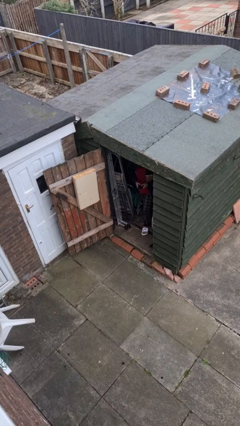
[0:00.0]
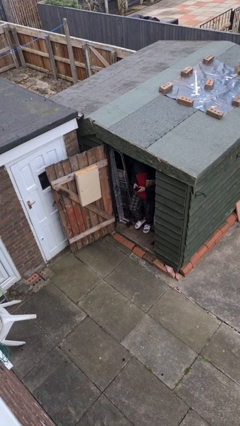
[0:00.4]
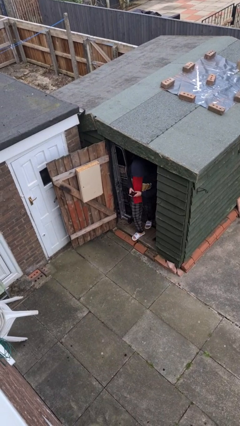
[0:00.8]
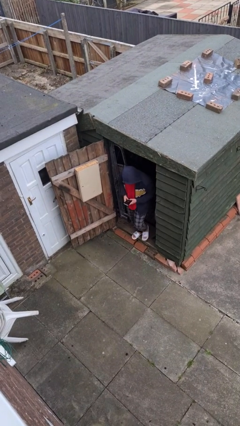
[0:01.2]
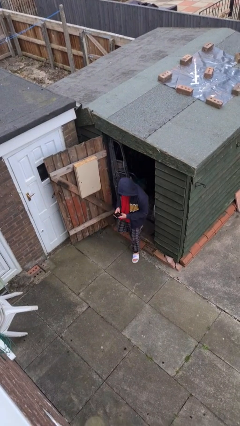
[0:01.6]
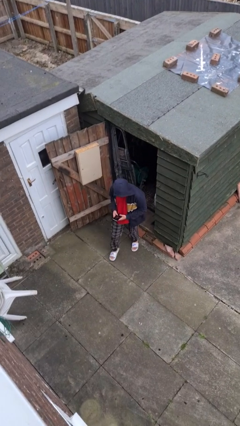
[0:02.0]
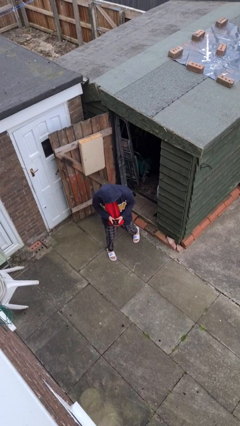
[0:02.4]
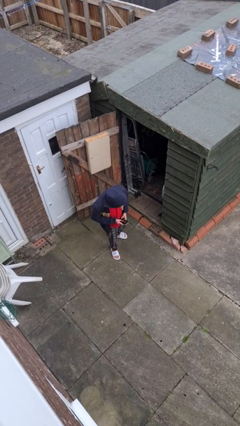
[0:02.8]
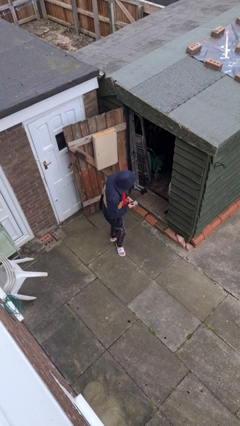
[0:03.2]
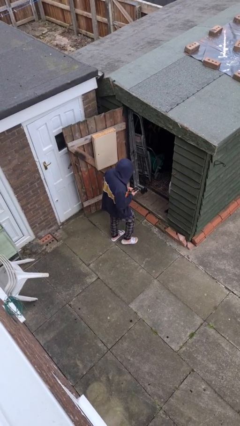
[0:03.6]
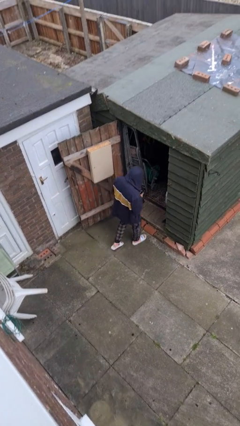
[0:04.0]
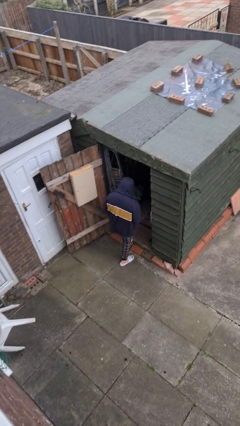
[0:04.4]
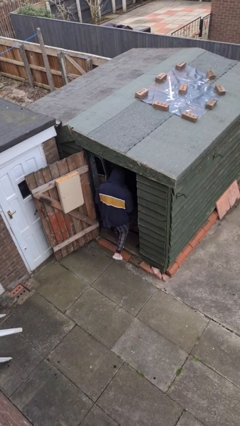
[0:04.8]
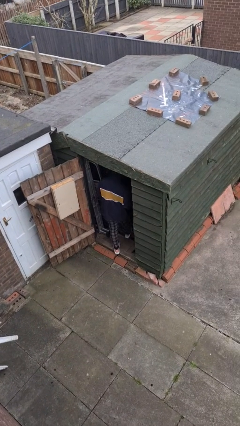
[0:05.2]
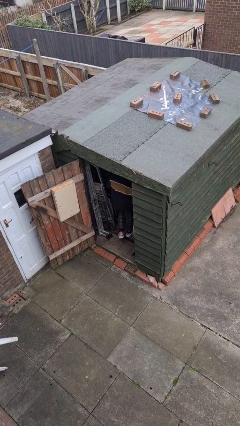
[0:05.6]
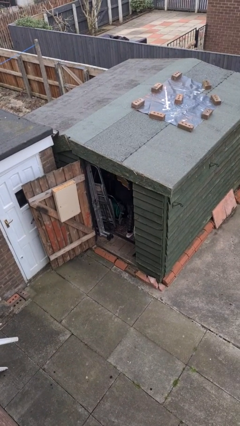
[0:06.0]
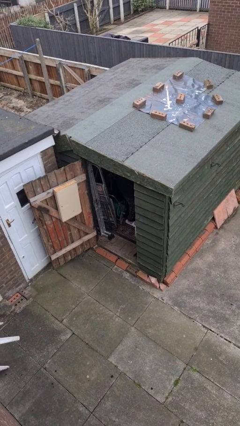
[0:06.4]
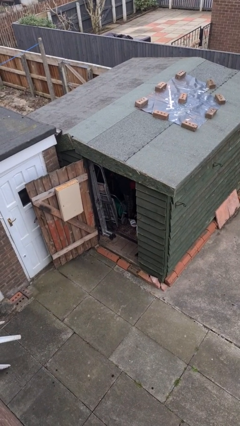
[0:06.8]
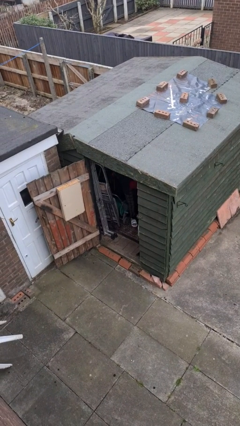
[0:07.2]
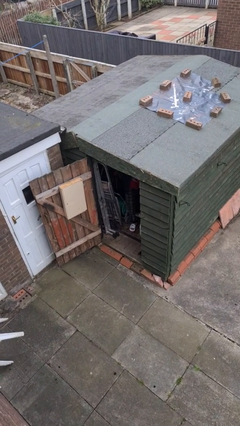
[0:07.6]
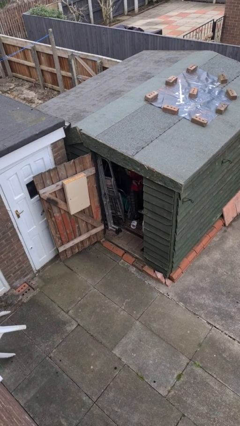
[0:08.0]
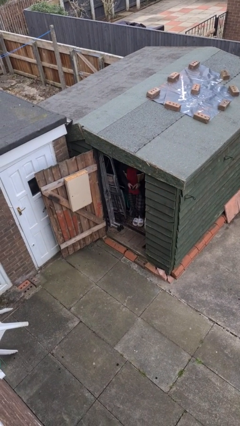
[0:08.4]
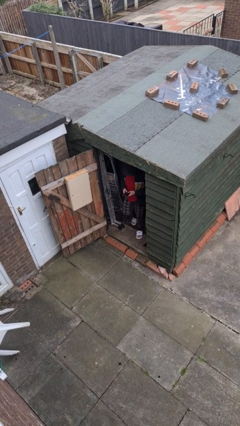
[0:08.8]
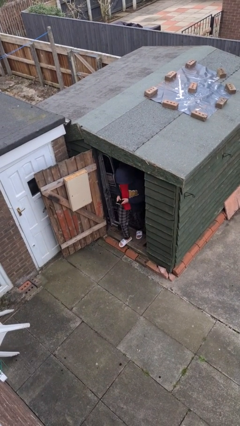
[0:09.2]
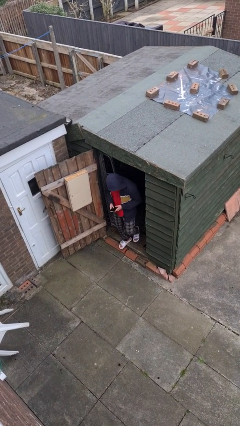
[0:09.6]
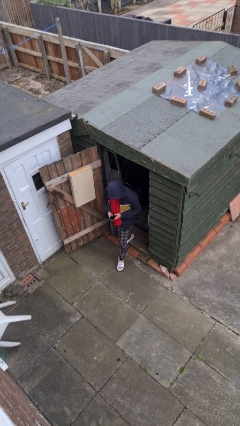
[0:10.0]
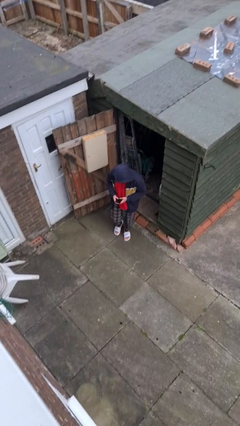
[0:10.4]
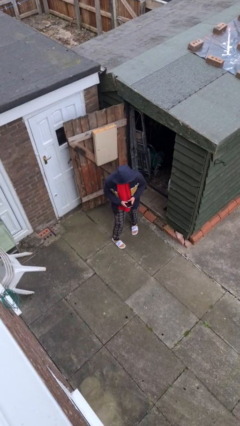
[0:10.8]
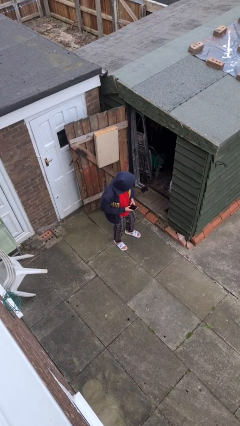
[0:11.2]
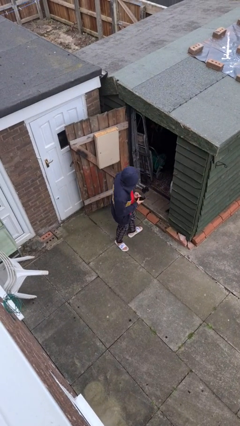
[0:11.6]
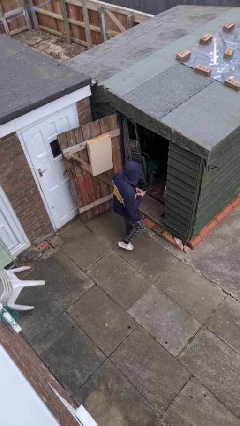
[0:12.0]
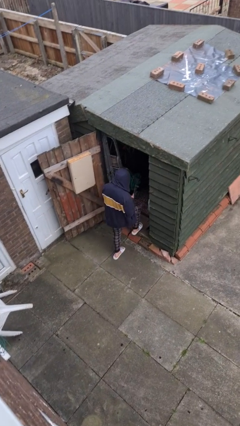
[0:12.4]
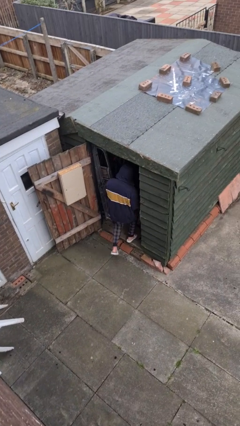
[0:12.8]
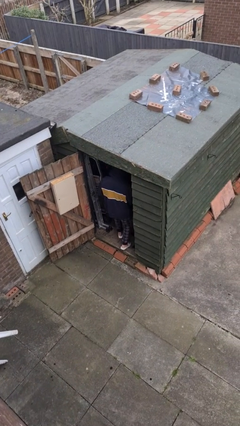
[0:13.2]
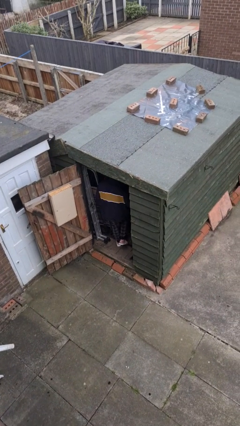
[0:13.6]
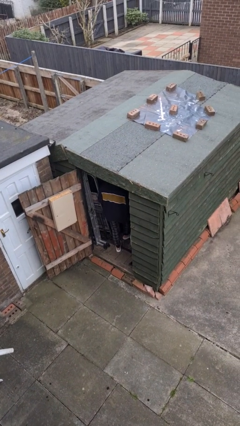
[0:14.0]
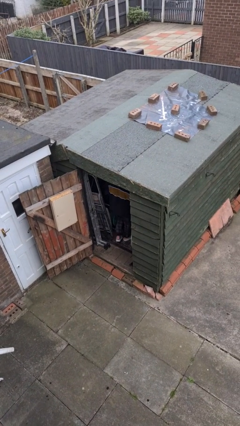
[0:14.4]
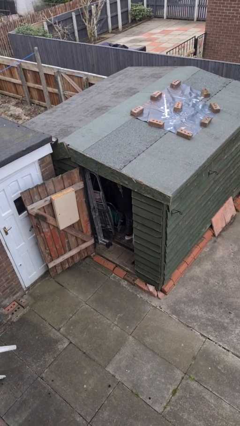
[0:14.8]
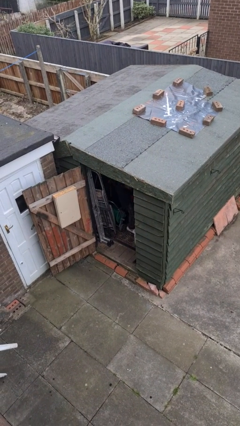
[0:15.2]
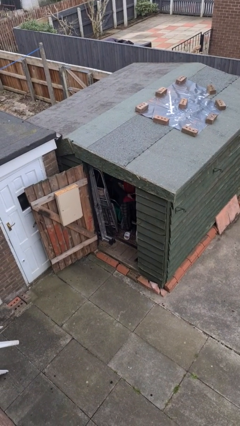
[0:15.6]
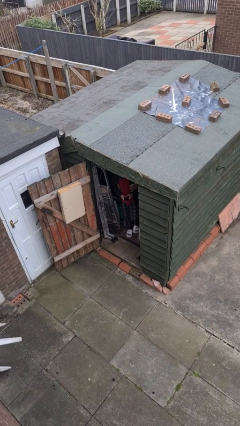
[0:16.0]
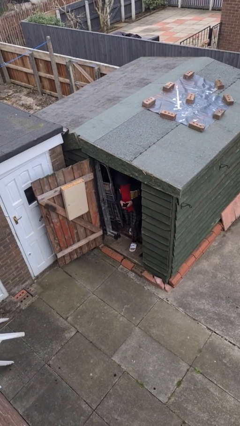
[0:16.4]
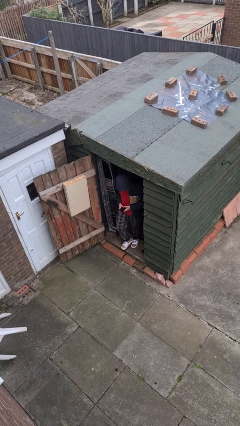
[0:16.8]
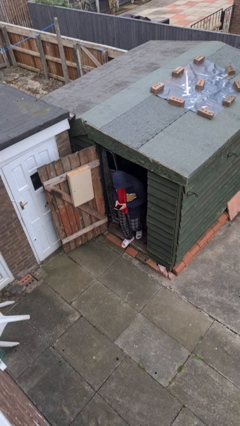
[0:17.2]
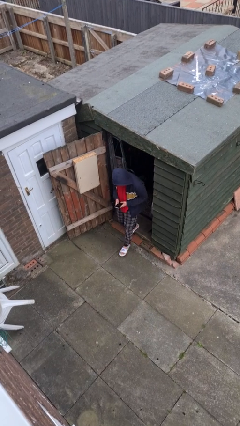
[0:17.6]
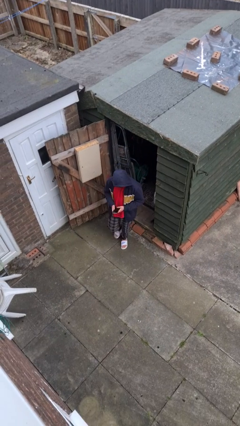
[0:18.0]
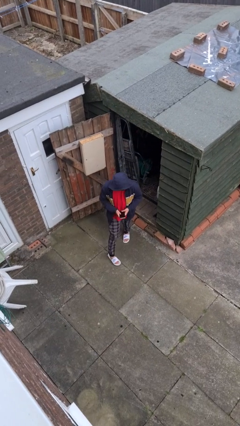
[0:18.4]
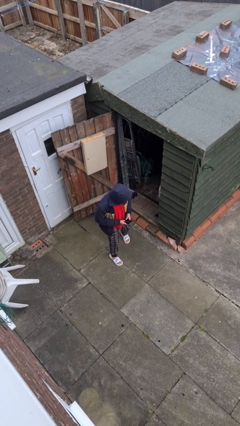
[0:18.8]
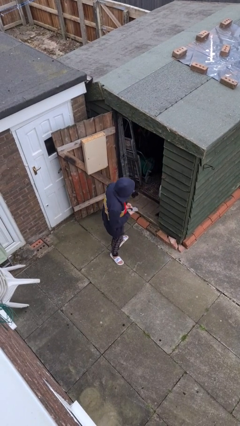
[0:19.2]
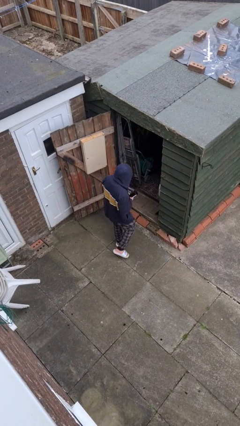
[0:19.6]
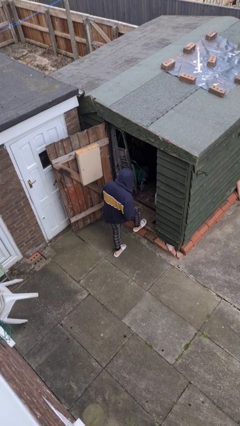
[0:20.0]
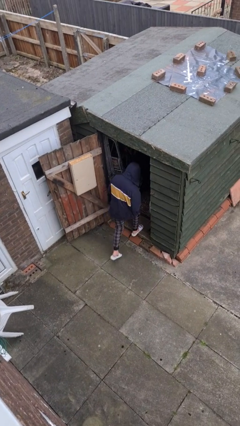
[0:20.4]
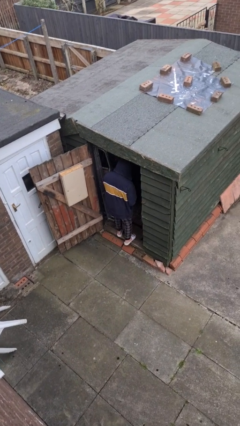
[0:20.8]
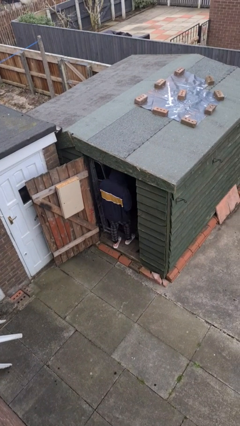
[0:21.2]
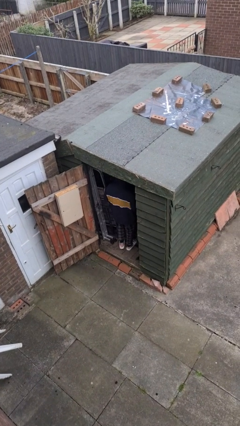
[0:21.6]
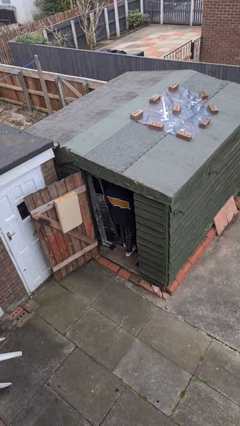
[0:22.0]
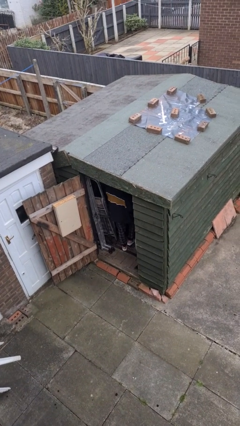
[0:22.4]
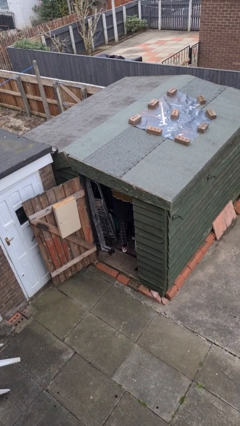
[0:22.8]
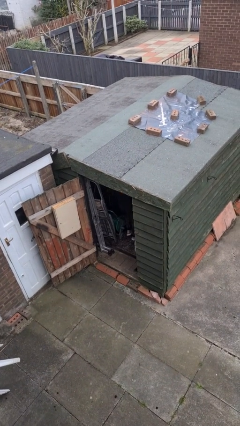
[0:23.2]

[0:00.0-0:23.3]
person texts on phone

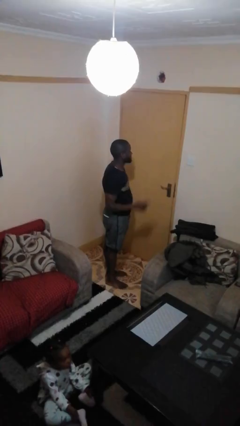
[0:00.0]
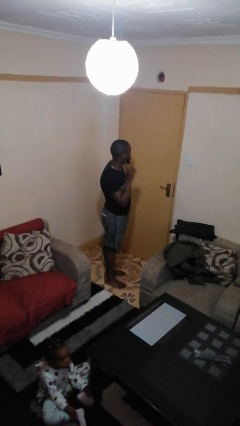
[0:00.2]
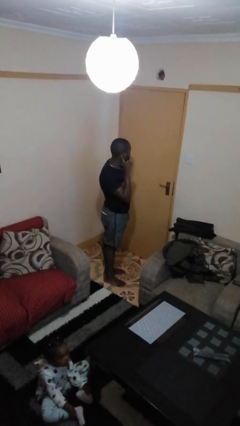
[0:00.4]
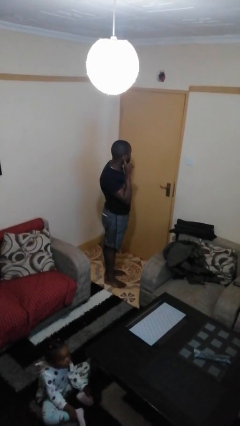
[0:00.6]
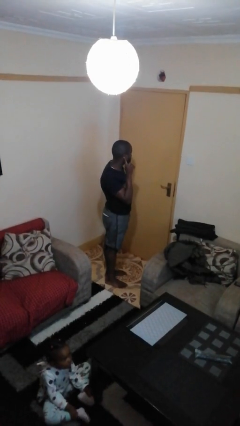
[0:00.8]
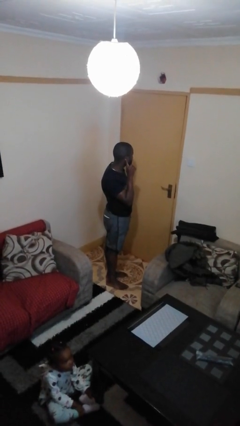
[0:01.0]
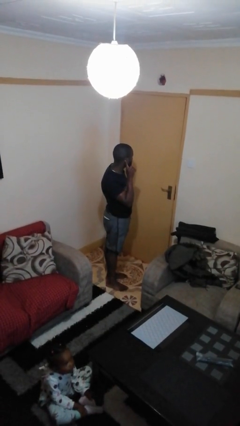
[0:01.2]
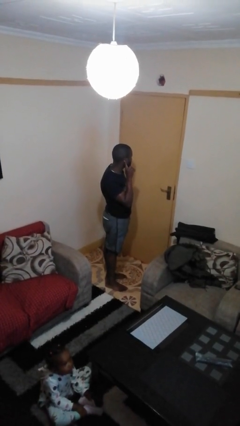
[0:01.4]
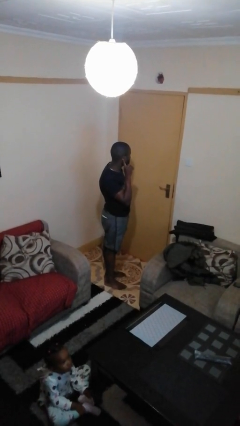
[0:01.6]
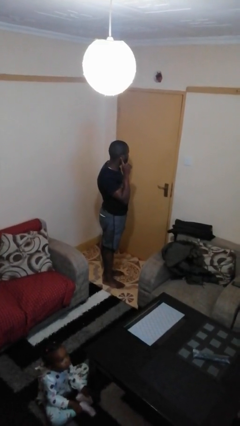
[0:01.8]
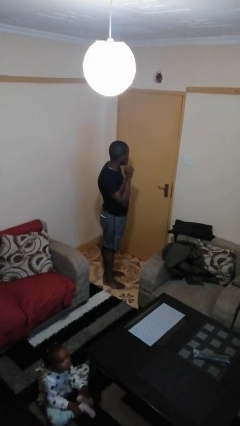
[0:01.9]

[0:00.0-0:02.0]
person gestures listen closely

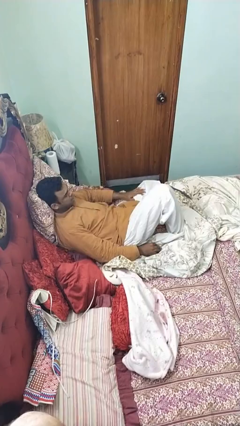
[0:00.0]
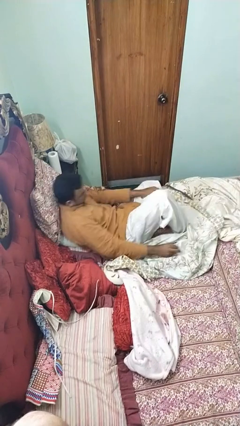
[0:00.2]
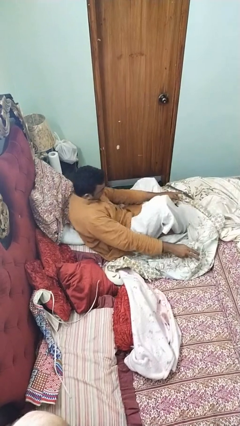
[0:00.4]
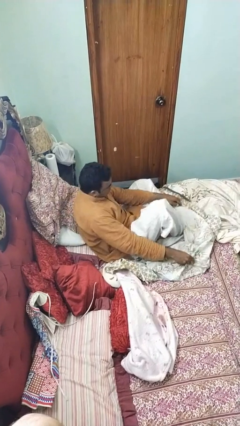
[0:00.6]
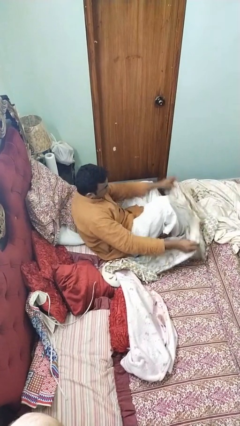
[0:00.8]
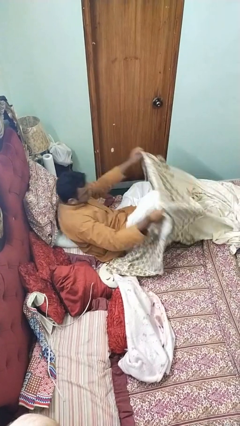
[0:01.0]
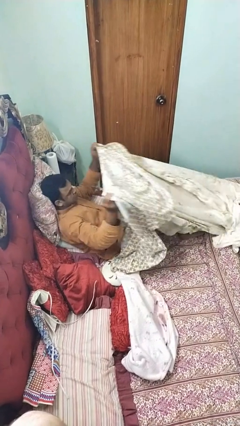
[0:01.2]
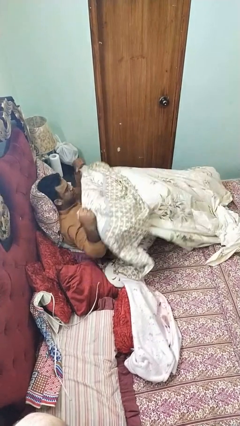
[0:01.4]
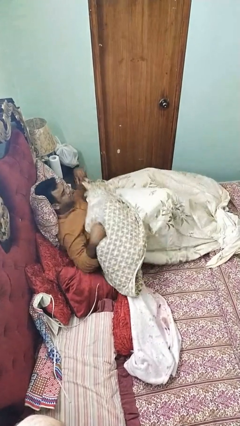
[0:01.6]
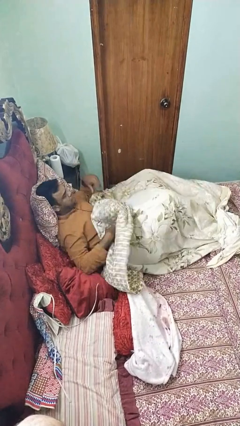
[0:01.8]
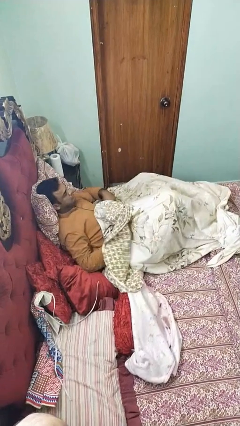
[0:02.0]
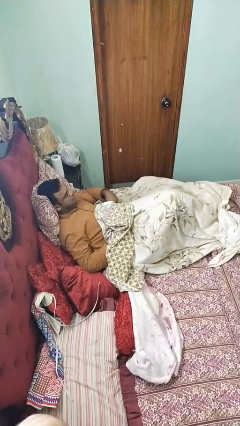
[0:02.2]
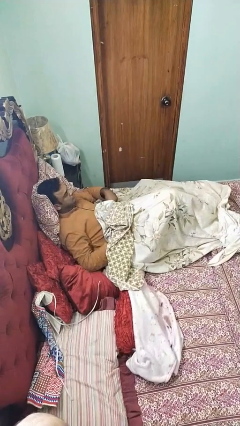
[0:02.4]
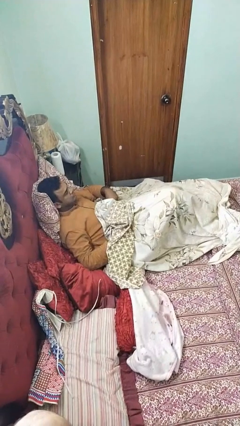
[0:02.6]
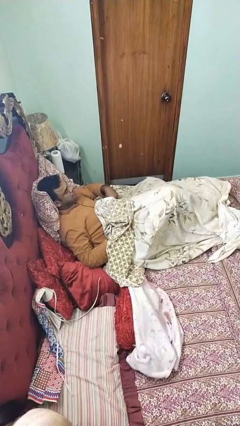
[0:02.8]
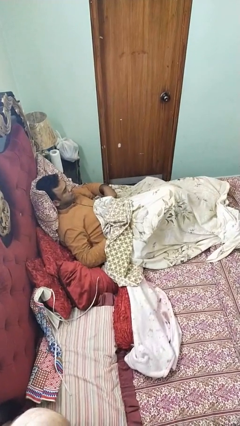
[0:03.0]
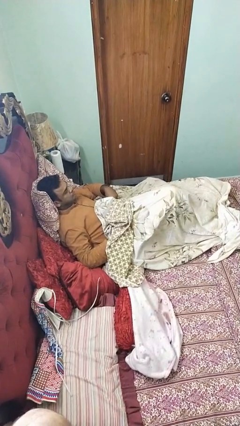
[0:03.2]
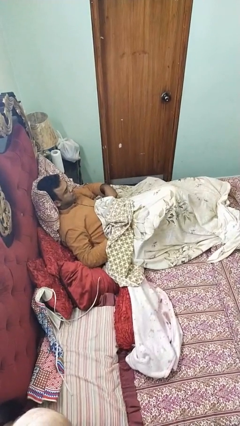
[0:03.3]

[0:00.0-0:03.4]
person covers with bedsheets

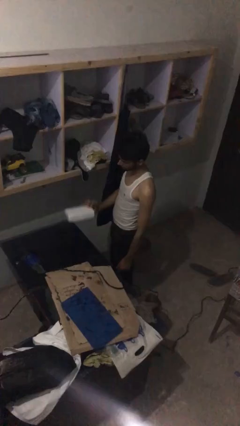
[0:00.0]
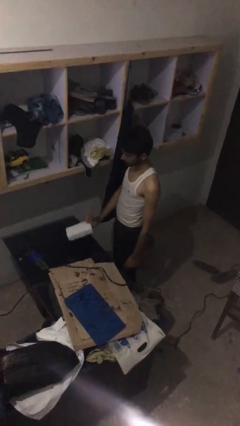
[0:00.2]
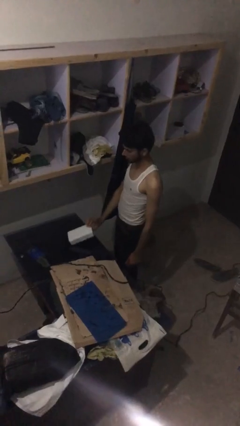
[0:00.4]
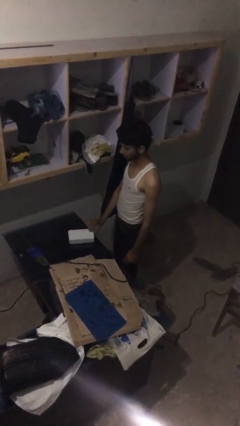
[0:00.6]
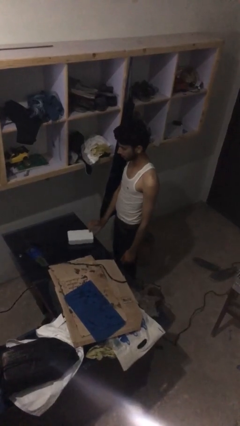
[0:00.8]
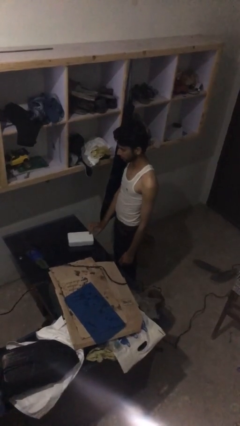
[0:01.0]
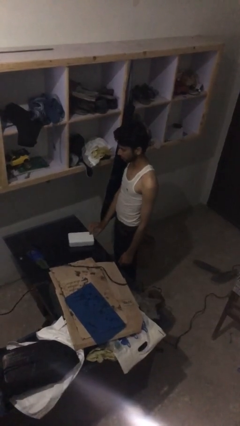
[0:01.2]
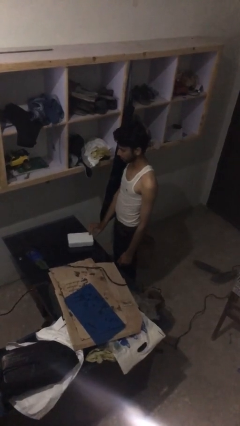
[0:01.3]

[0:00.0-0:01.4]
person puts down object on table
